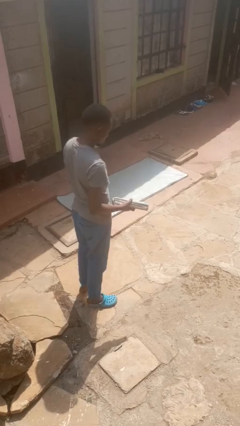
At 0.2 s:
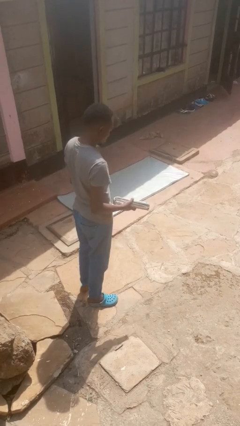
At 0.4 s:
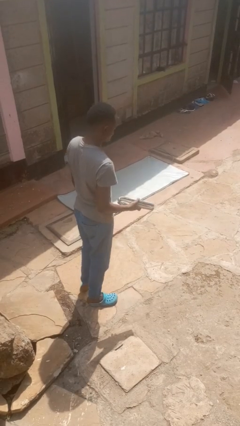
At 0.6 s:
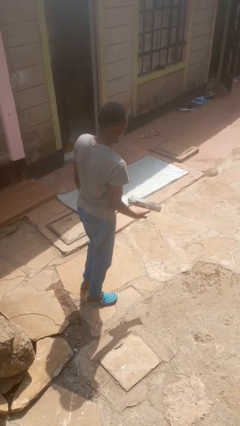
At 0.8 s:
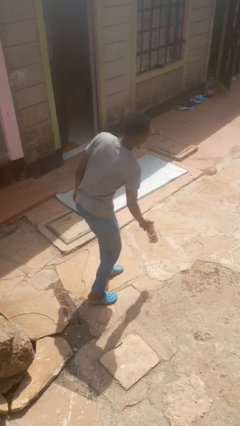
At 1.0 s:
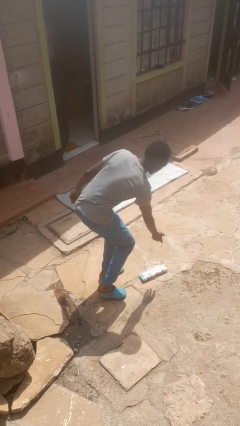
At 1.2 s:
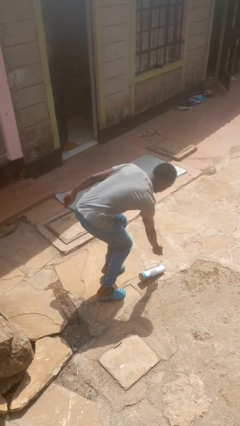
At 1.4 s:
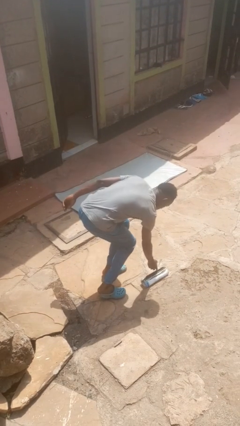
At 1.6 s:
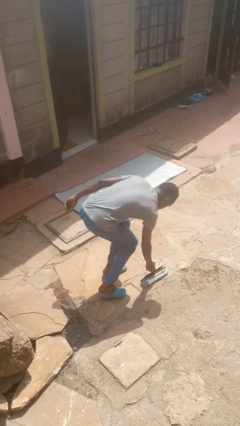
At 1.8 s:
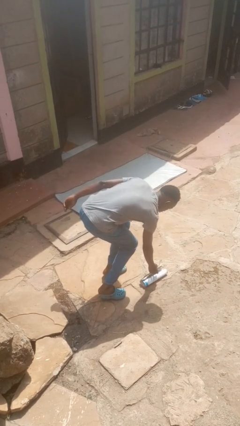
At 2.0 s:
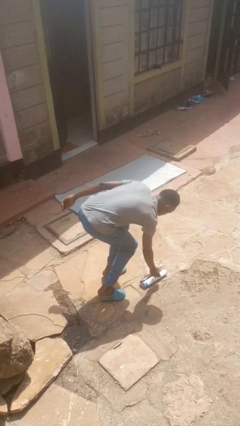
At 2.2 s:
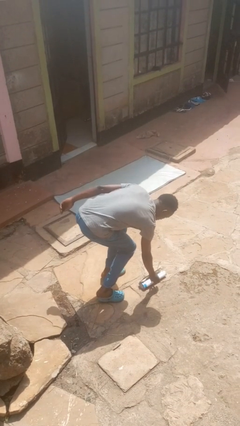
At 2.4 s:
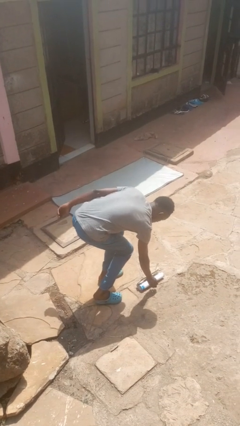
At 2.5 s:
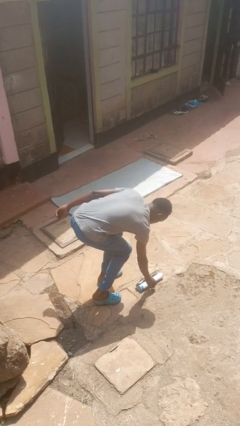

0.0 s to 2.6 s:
person drops object

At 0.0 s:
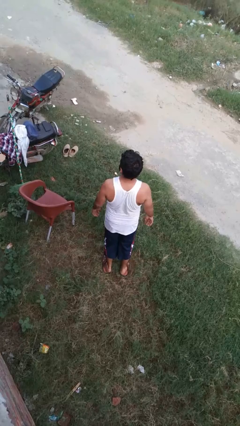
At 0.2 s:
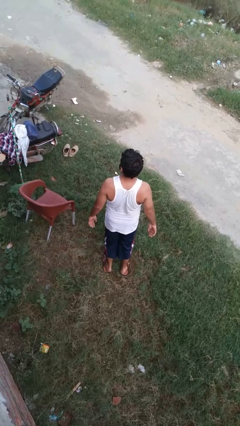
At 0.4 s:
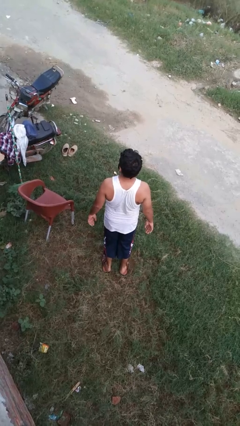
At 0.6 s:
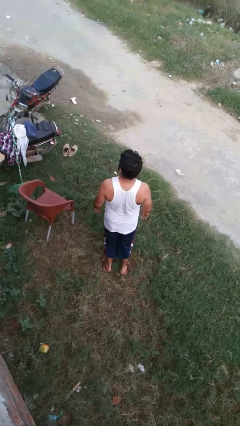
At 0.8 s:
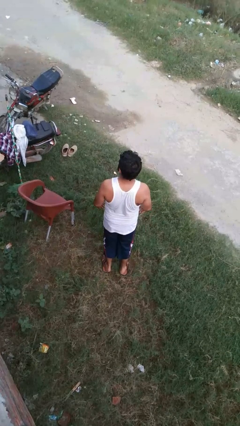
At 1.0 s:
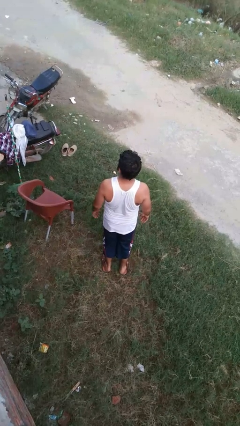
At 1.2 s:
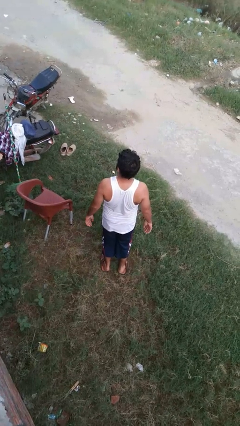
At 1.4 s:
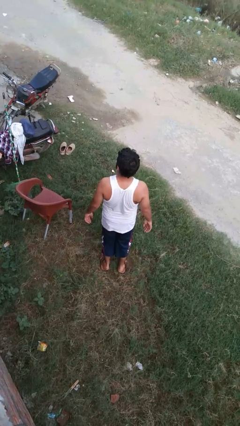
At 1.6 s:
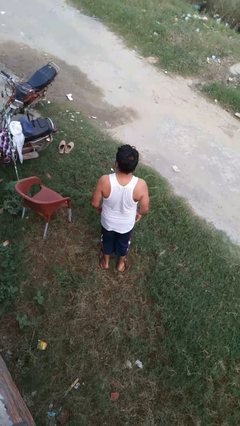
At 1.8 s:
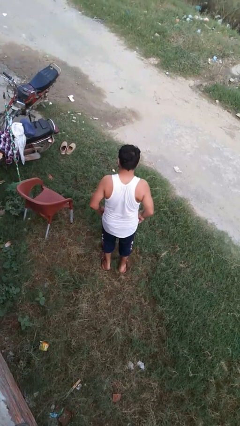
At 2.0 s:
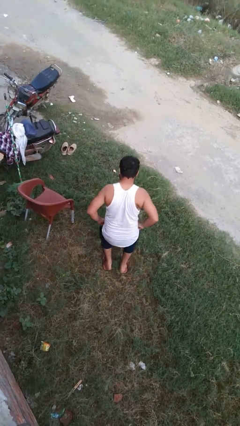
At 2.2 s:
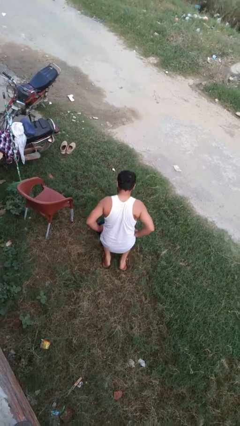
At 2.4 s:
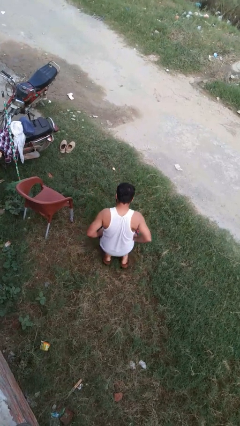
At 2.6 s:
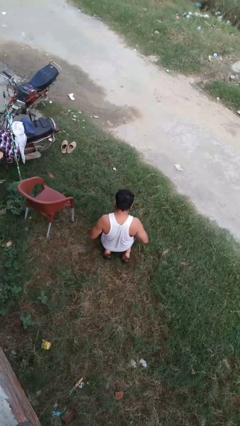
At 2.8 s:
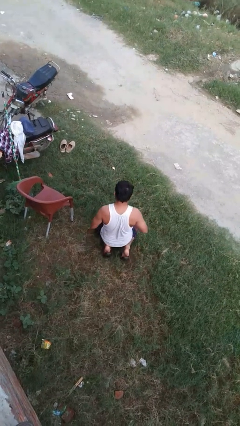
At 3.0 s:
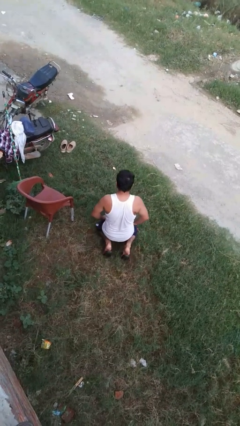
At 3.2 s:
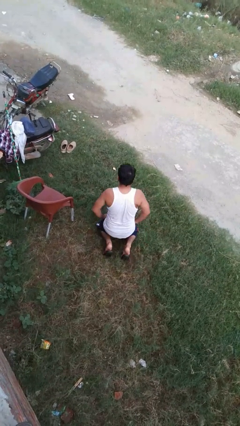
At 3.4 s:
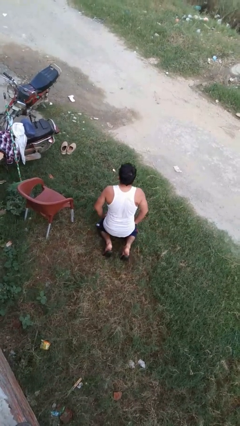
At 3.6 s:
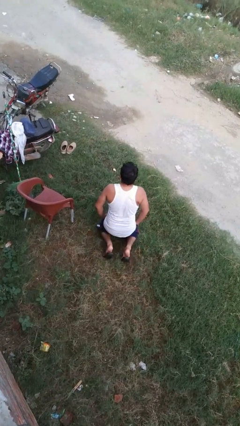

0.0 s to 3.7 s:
person kneels

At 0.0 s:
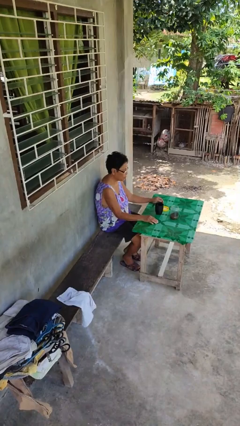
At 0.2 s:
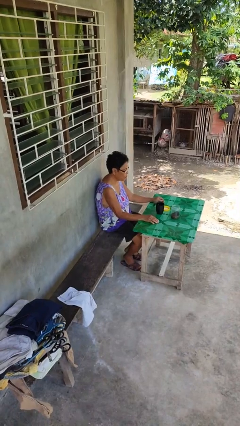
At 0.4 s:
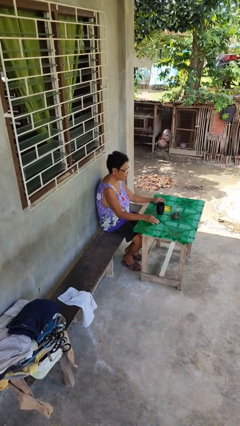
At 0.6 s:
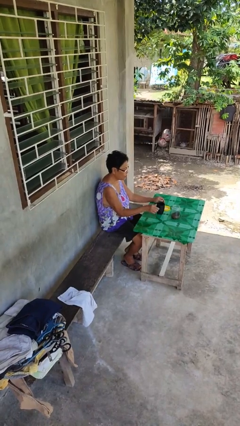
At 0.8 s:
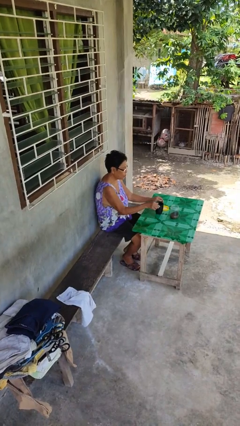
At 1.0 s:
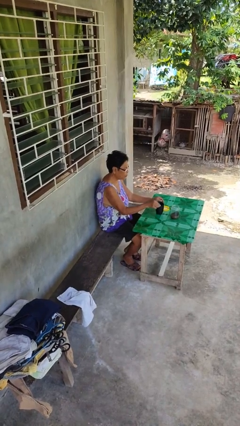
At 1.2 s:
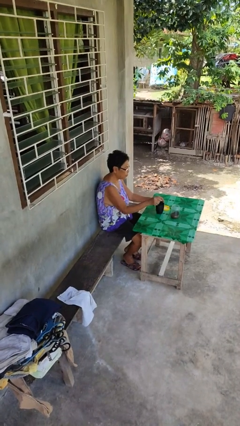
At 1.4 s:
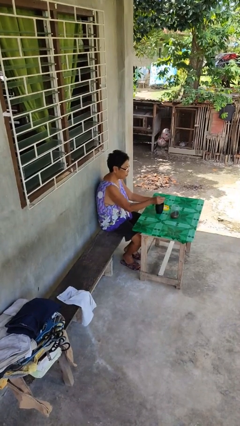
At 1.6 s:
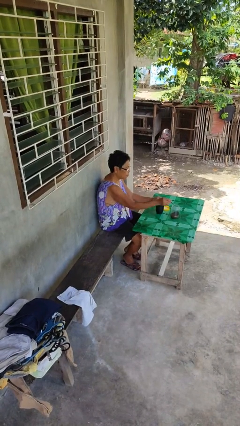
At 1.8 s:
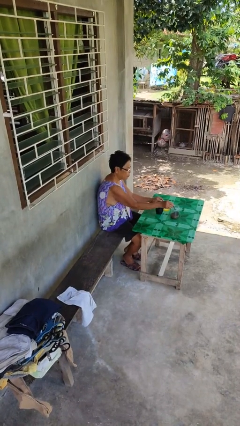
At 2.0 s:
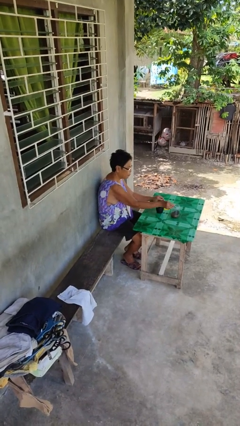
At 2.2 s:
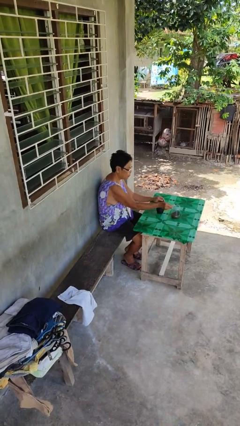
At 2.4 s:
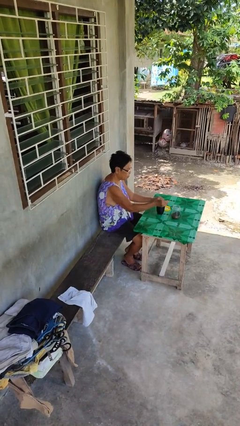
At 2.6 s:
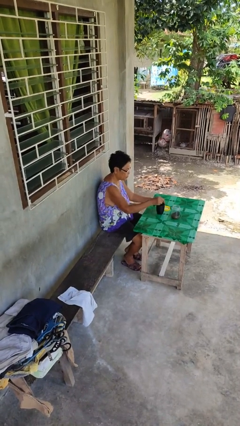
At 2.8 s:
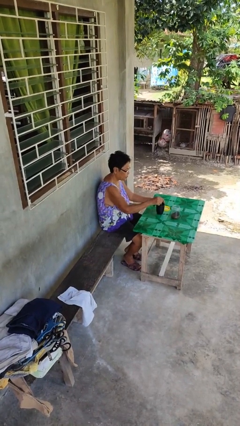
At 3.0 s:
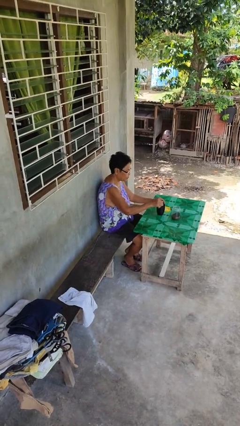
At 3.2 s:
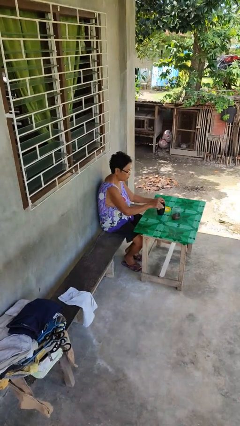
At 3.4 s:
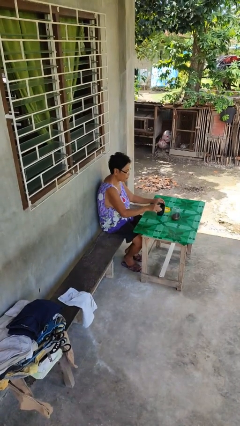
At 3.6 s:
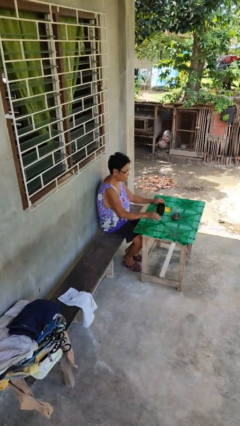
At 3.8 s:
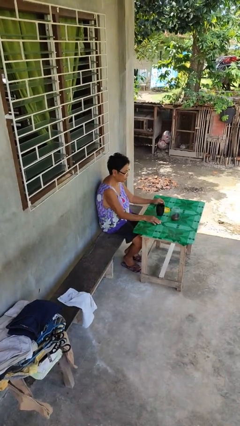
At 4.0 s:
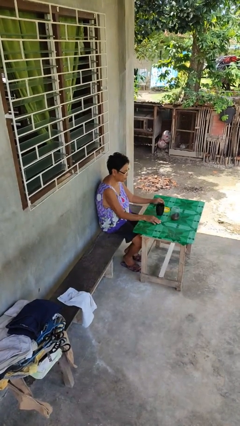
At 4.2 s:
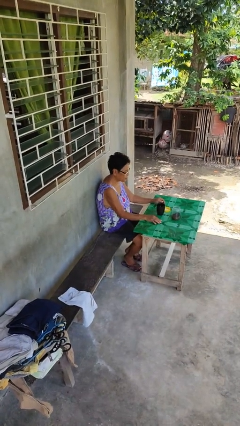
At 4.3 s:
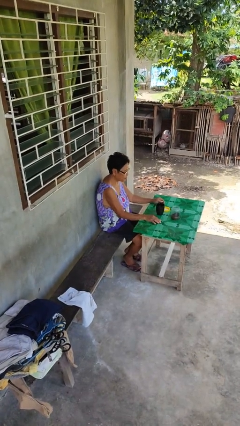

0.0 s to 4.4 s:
person pours coffee into mug

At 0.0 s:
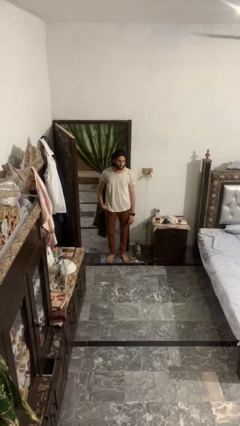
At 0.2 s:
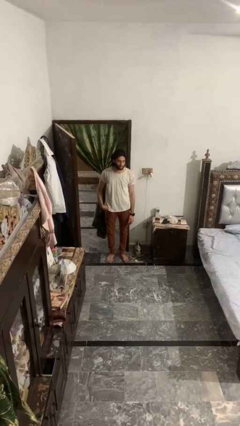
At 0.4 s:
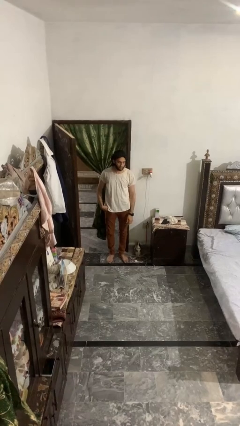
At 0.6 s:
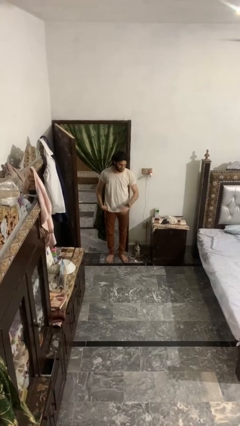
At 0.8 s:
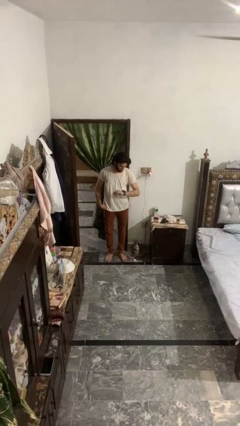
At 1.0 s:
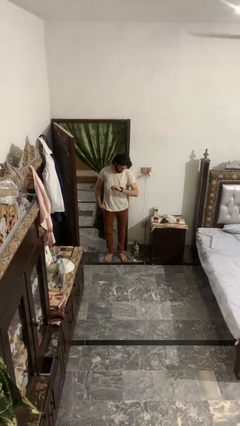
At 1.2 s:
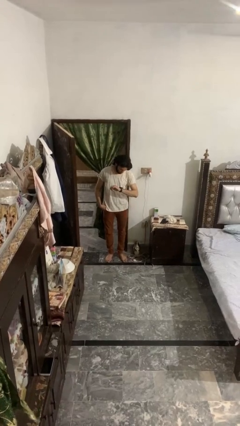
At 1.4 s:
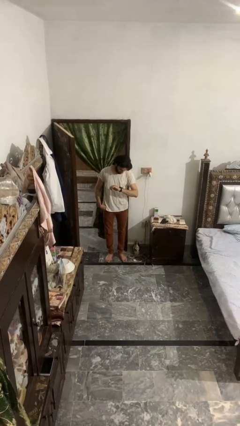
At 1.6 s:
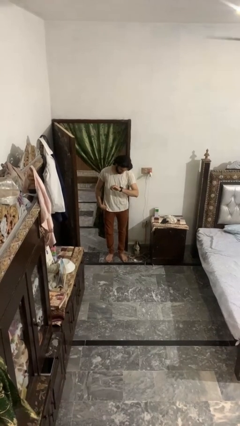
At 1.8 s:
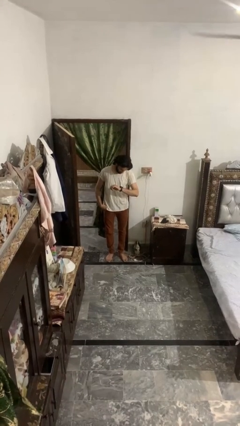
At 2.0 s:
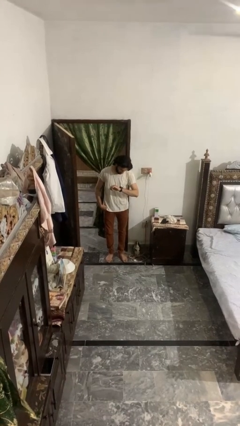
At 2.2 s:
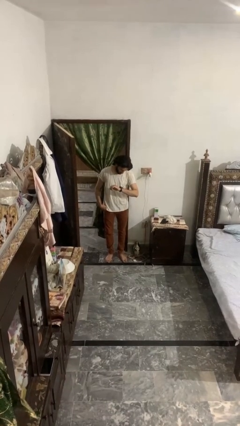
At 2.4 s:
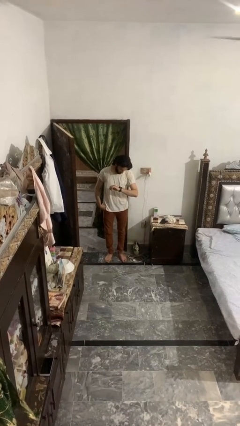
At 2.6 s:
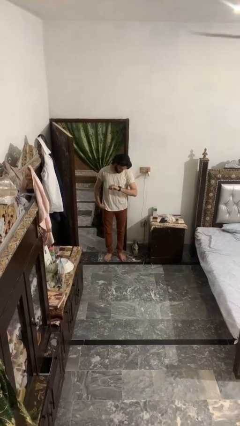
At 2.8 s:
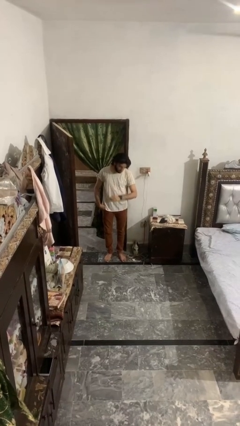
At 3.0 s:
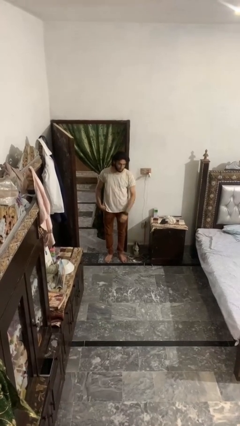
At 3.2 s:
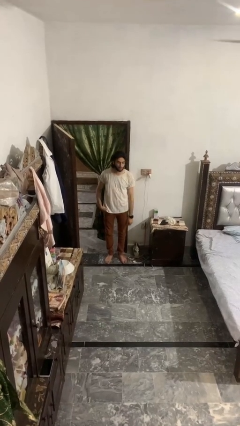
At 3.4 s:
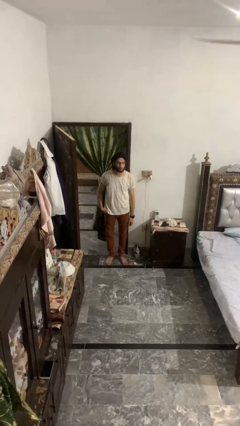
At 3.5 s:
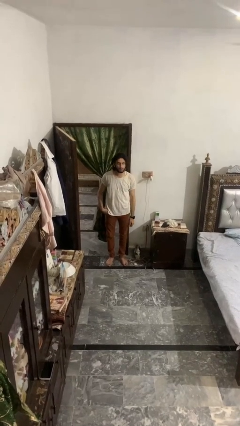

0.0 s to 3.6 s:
person looks at wristwatch

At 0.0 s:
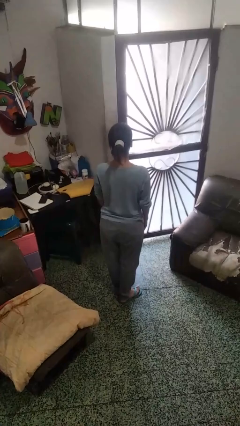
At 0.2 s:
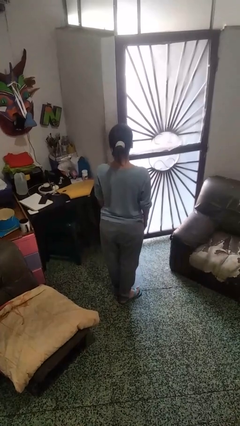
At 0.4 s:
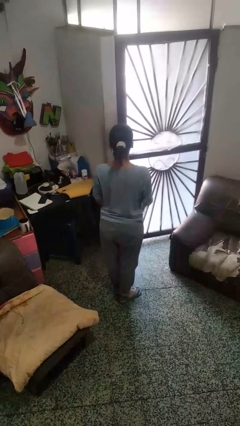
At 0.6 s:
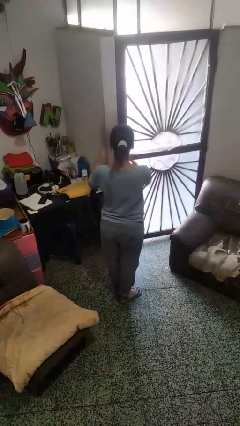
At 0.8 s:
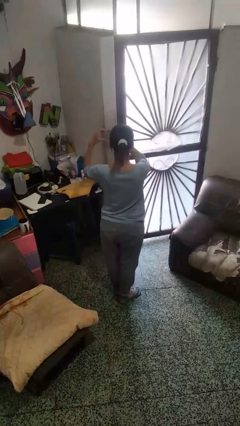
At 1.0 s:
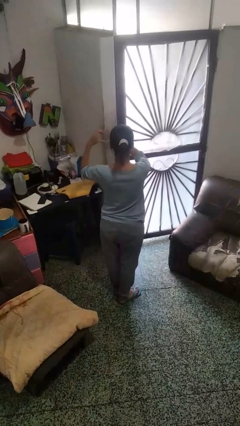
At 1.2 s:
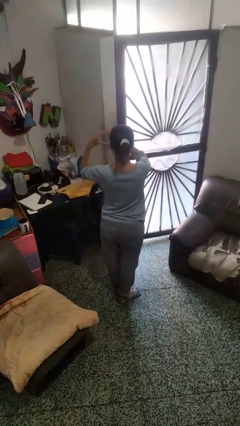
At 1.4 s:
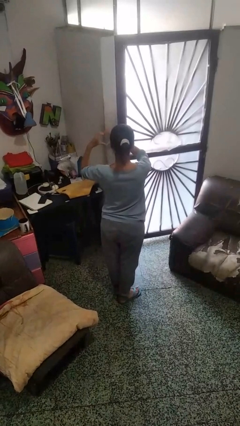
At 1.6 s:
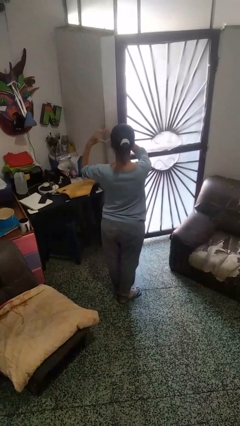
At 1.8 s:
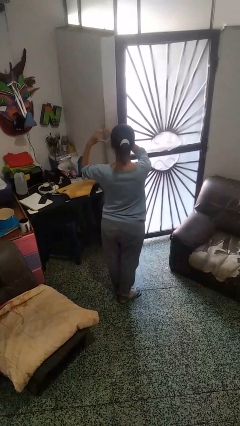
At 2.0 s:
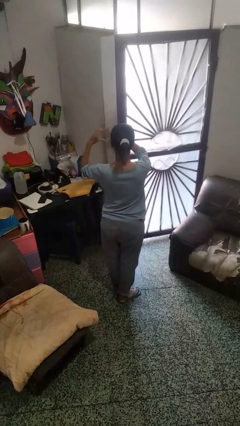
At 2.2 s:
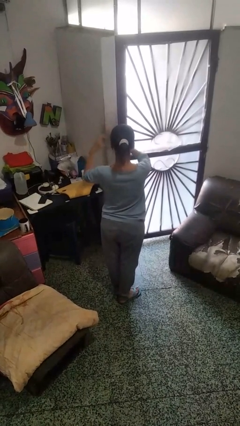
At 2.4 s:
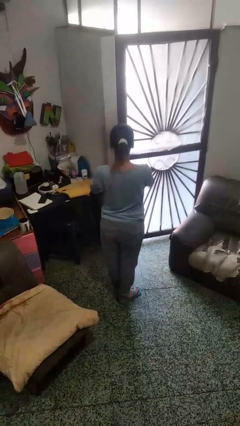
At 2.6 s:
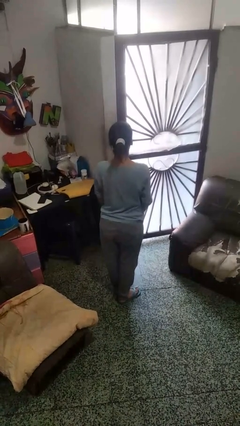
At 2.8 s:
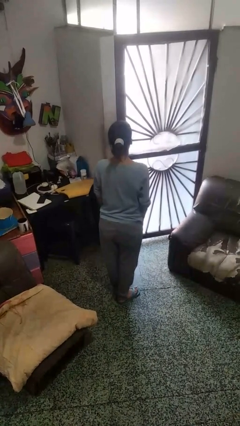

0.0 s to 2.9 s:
person gestures heart

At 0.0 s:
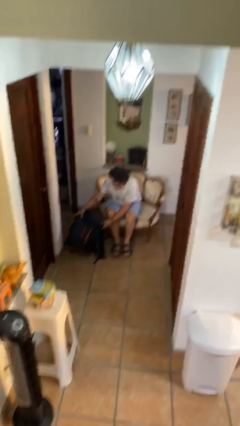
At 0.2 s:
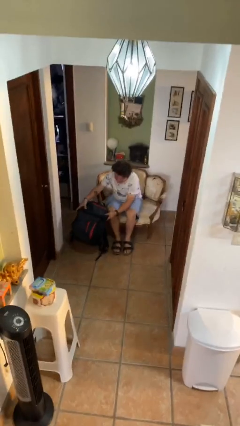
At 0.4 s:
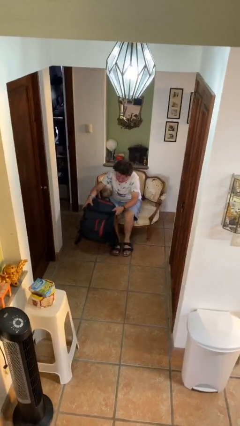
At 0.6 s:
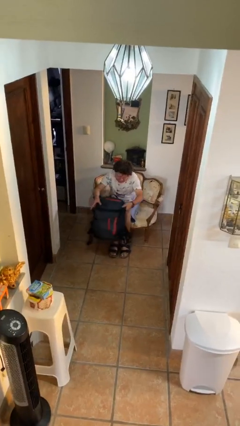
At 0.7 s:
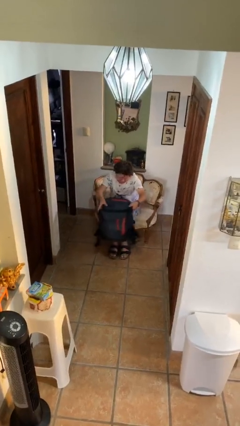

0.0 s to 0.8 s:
person picks up object from floor
